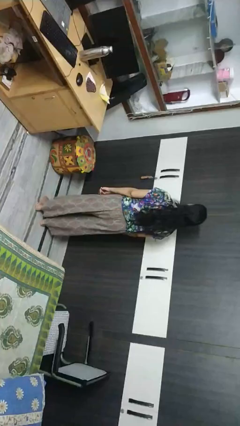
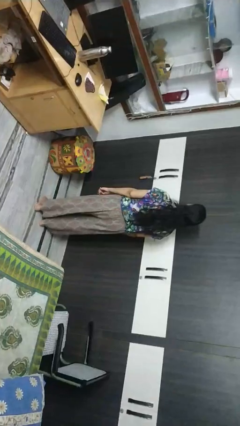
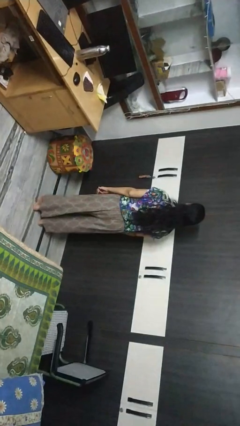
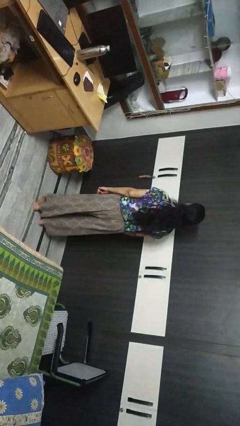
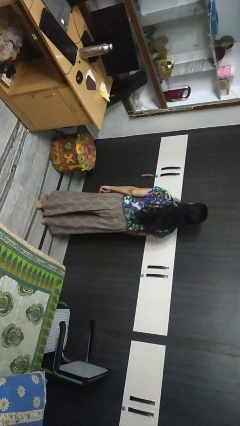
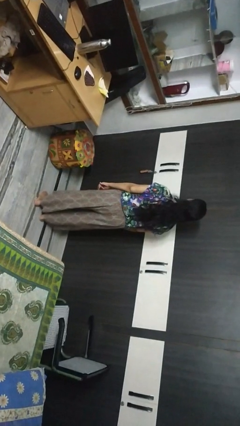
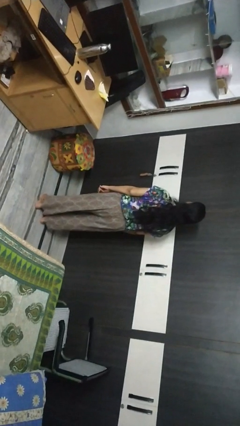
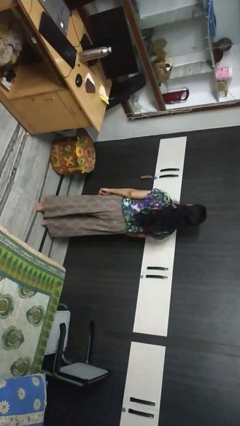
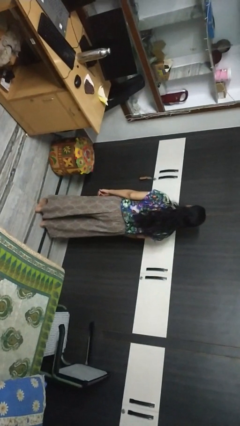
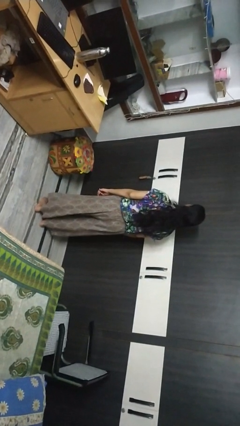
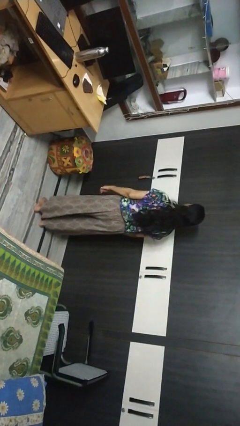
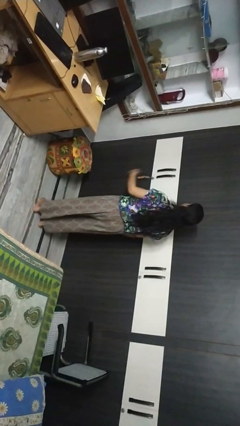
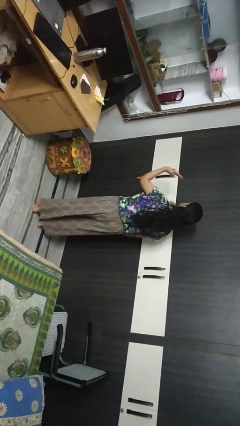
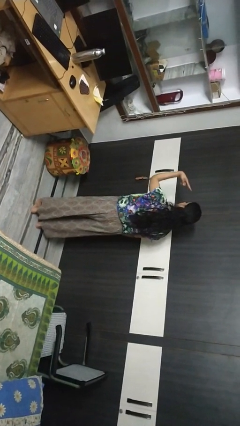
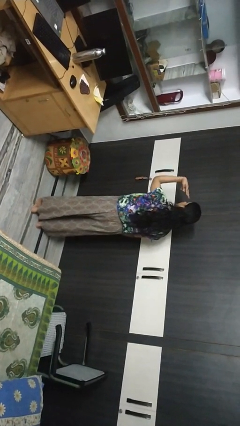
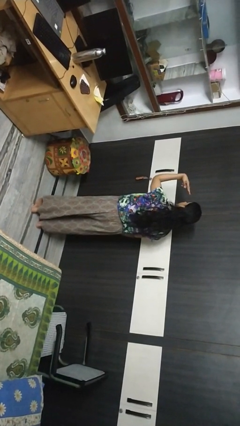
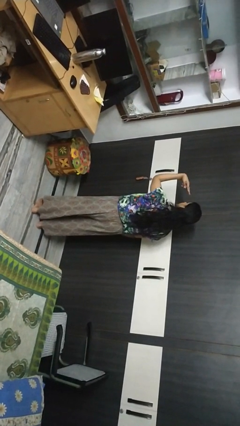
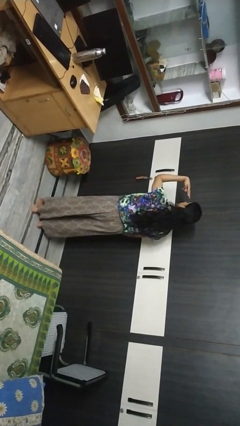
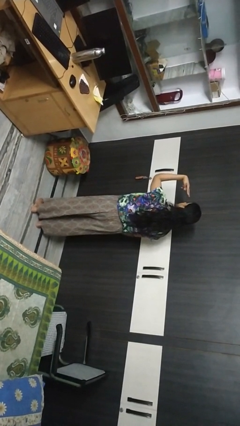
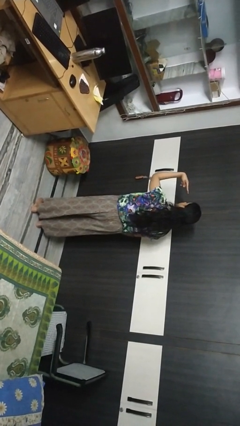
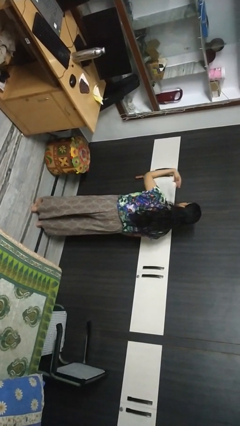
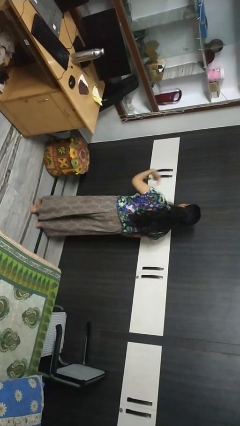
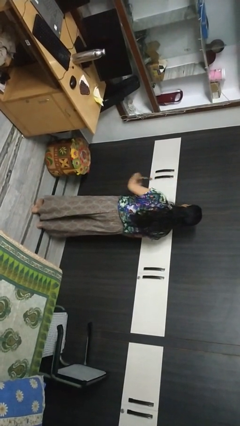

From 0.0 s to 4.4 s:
person gestures watch closely

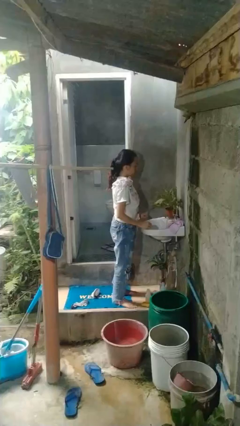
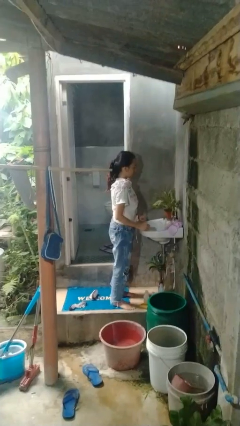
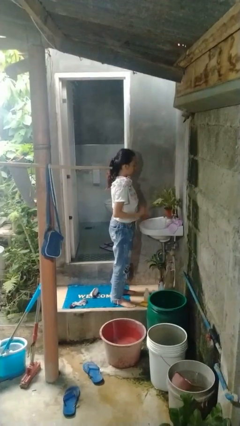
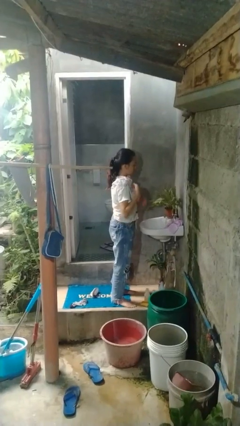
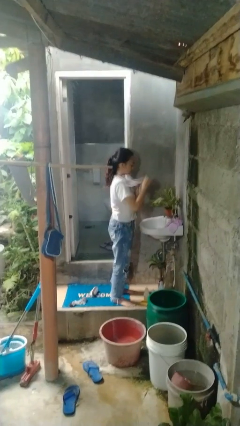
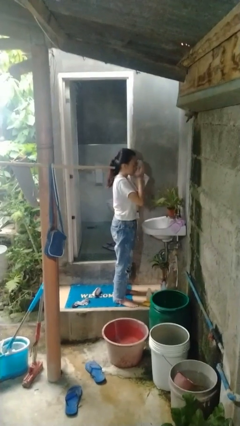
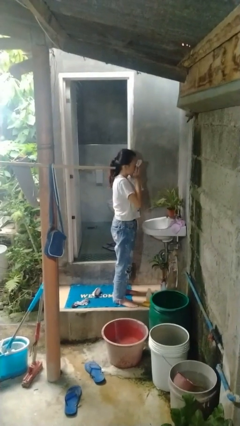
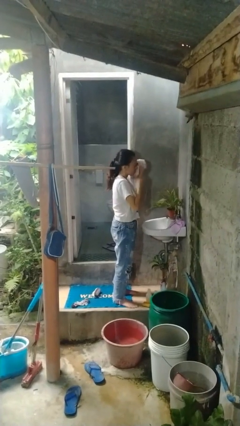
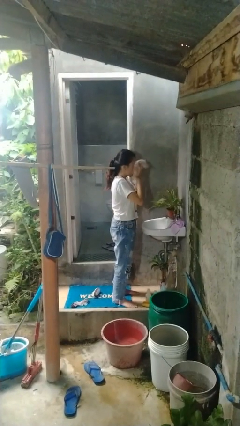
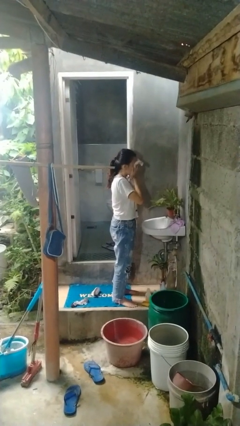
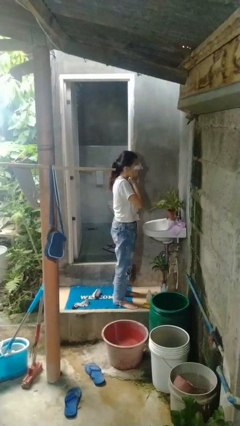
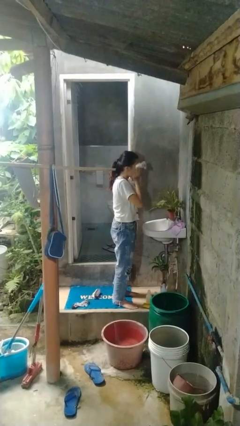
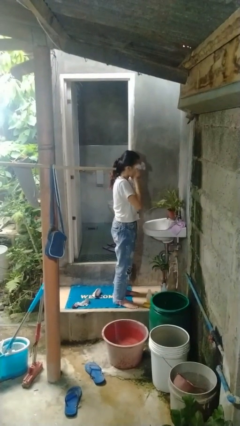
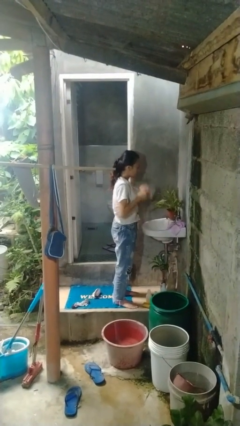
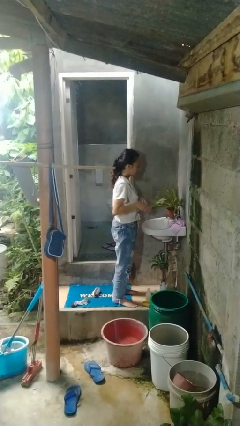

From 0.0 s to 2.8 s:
person dries face with towel

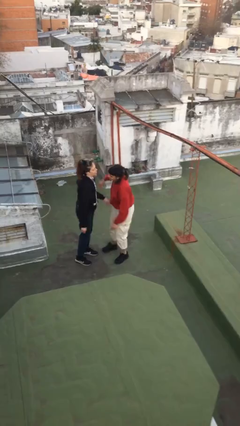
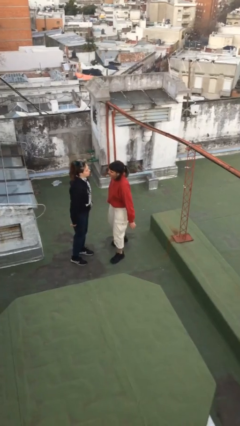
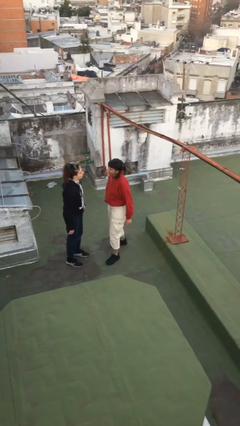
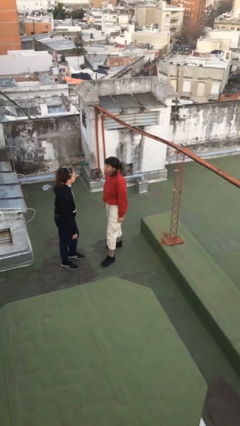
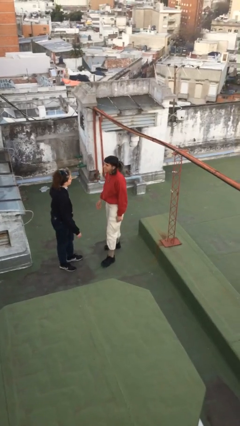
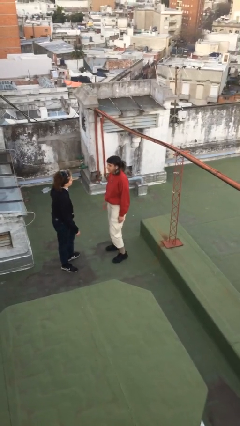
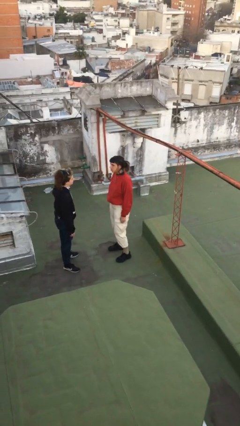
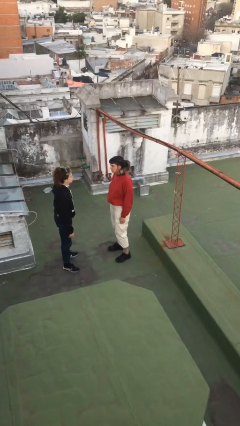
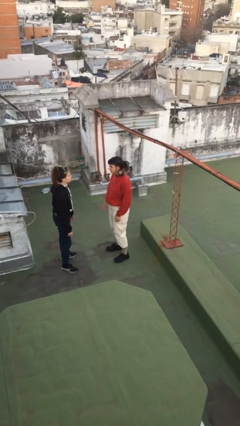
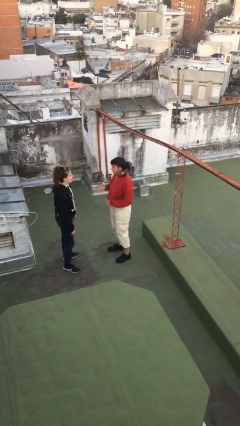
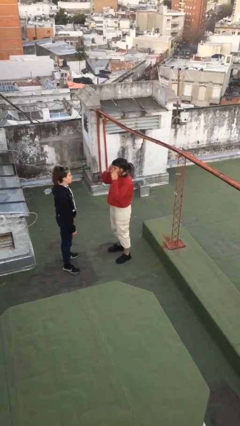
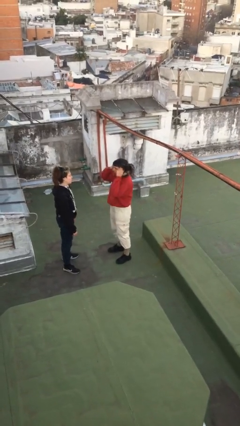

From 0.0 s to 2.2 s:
person talks to person

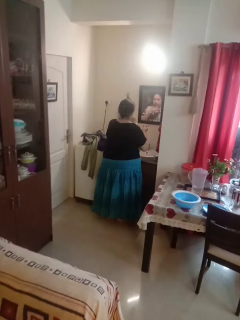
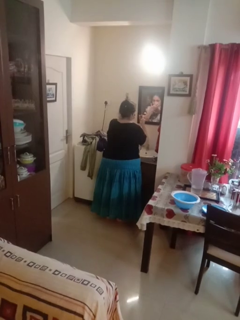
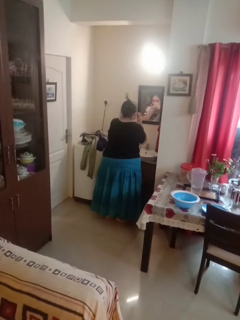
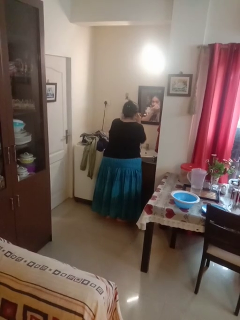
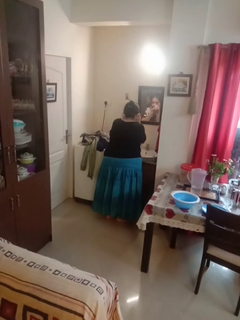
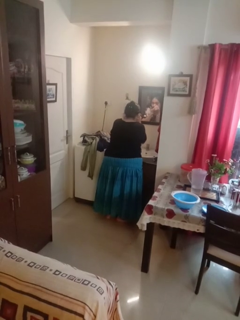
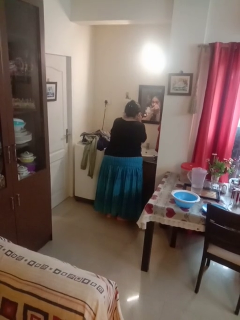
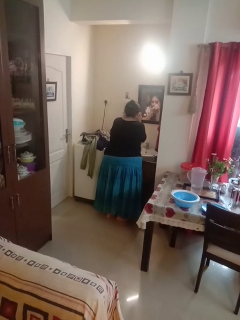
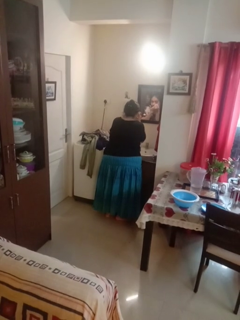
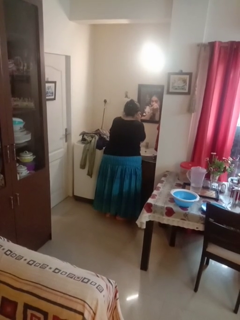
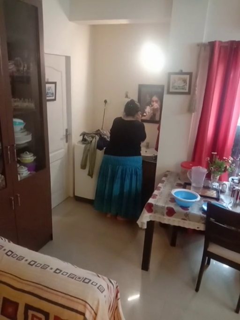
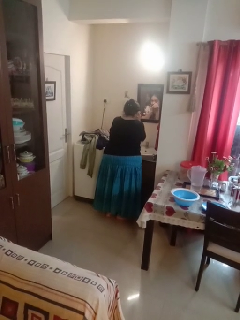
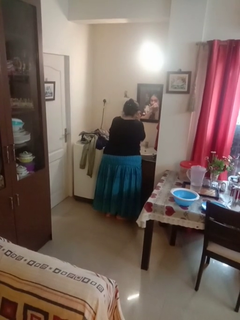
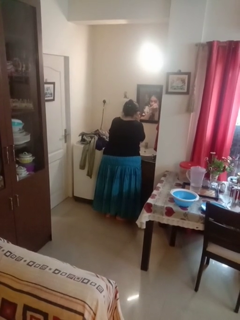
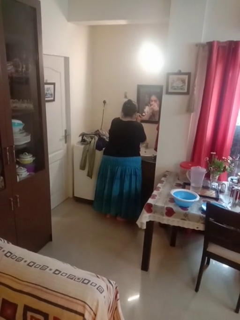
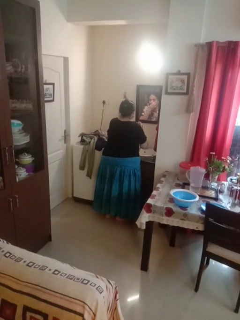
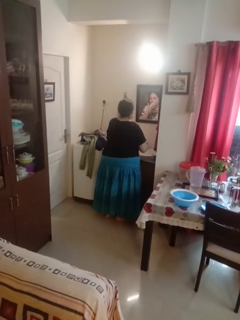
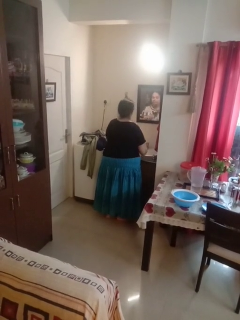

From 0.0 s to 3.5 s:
person applies eye makeup

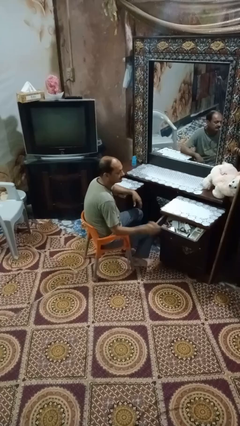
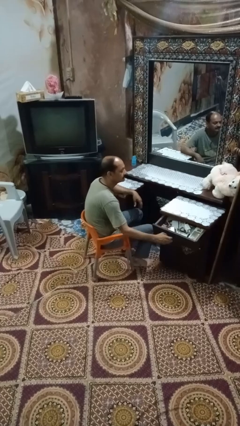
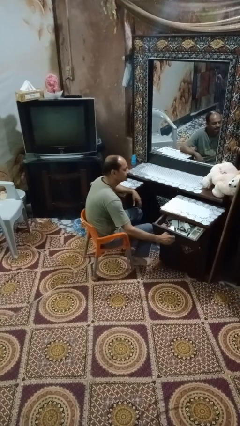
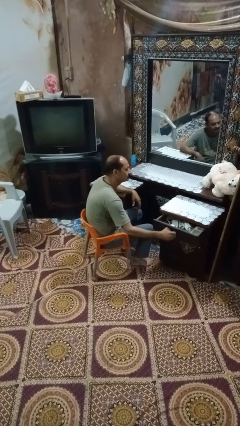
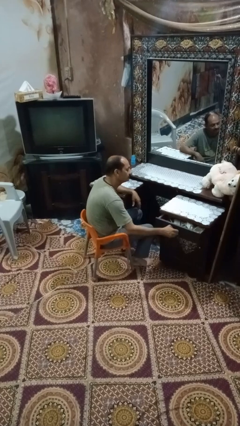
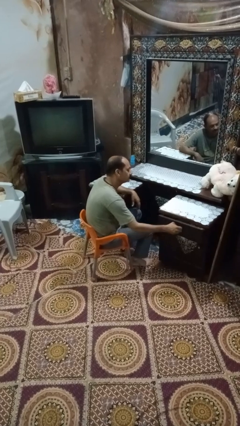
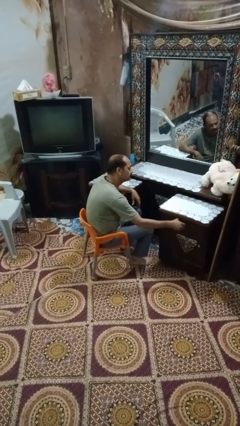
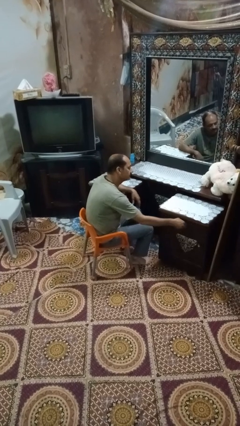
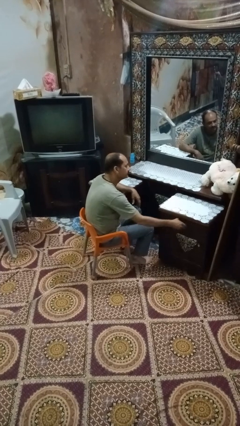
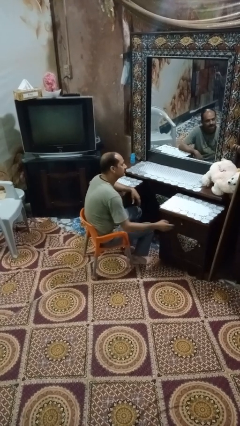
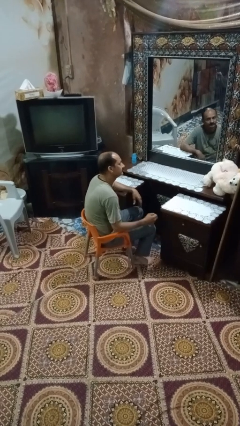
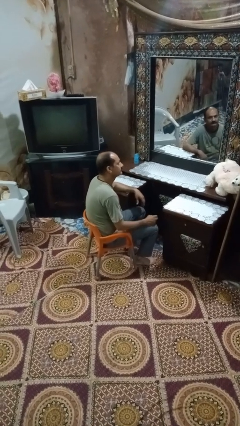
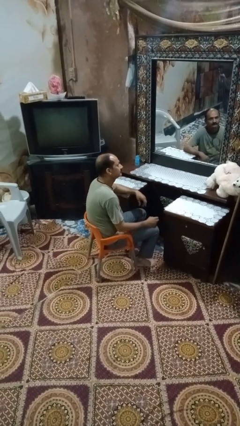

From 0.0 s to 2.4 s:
person closes dresser drawer

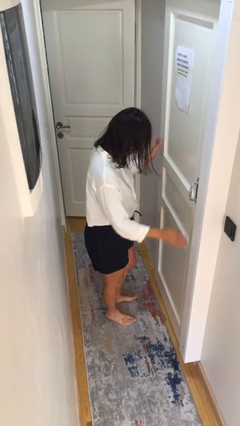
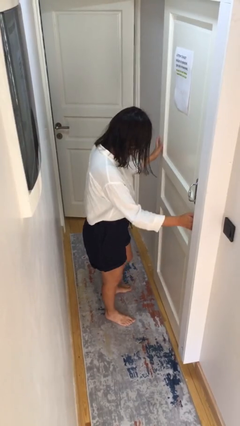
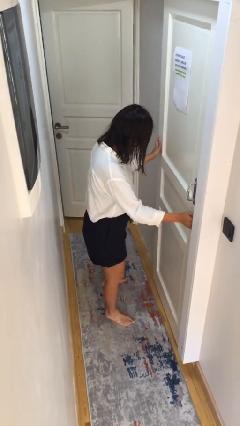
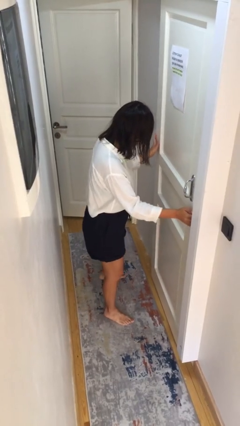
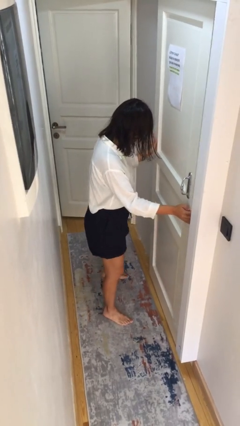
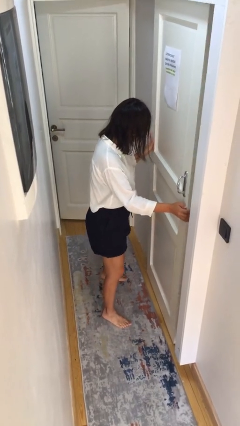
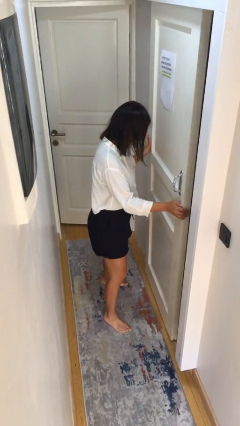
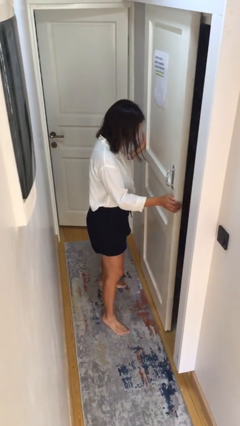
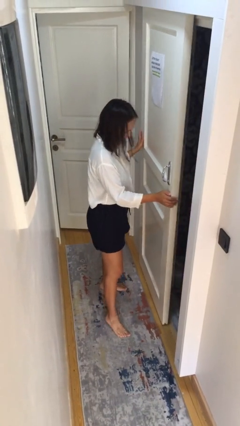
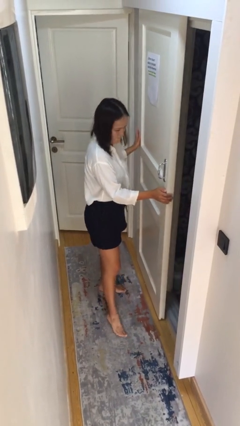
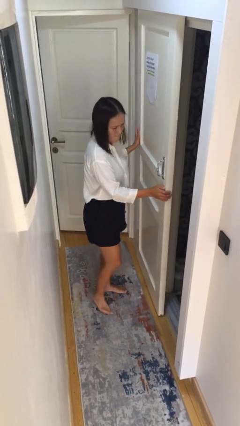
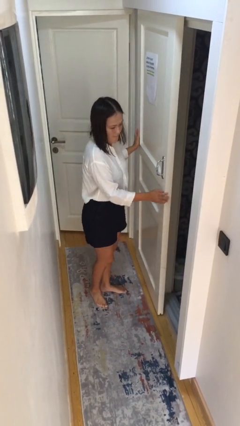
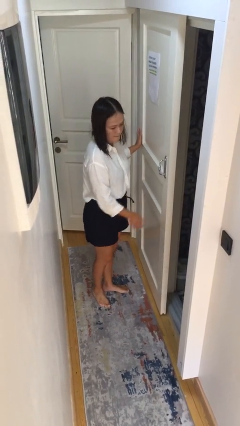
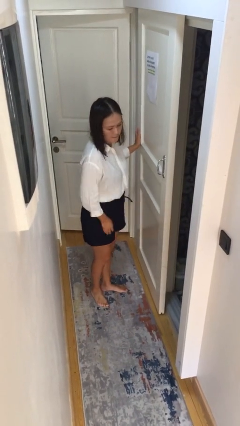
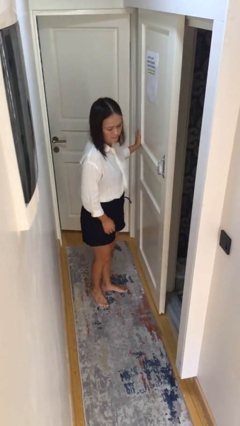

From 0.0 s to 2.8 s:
person opens sliding door
